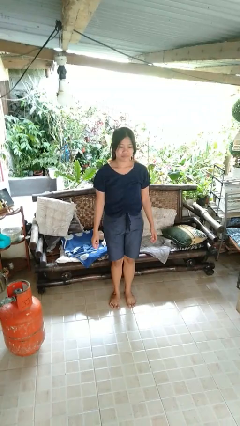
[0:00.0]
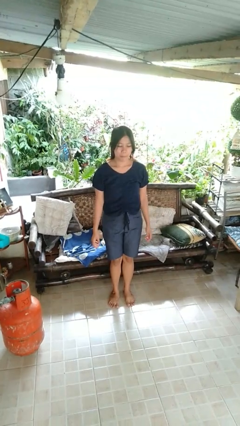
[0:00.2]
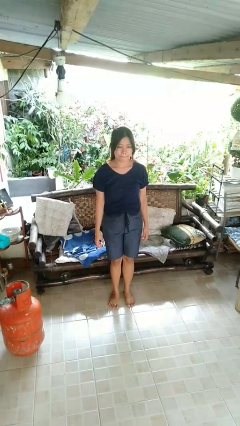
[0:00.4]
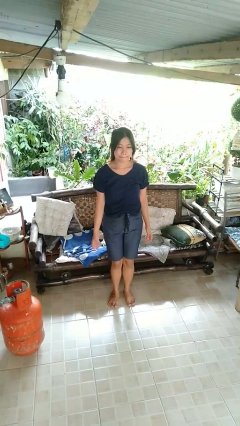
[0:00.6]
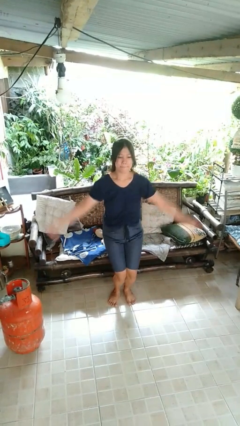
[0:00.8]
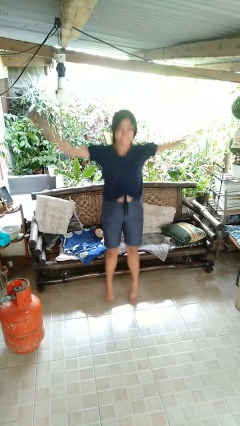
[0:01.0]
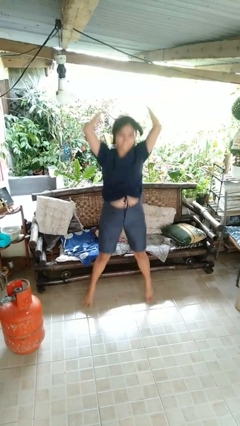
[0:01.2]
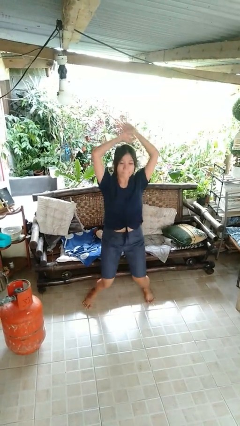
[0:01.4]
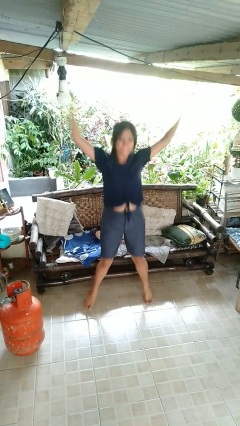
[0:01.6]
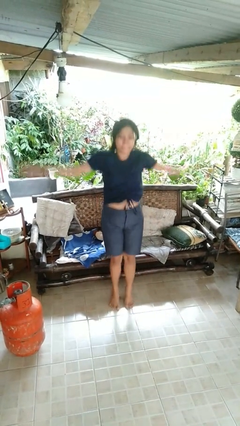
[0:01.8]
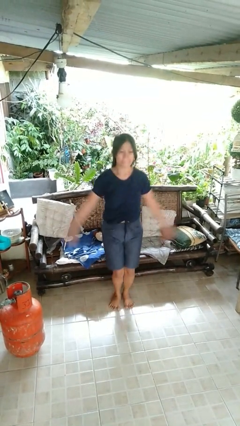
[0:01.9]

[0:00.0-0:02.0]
person exercises with jumping jacks

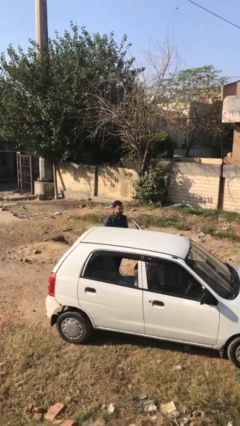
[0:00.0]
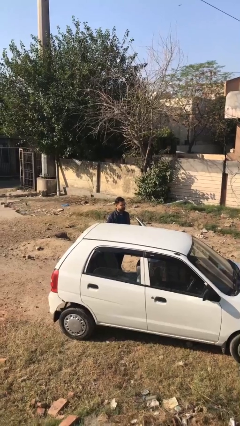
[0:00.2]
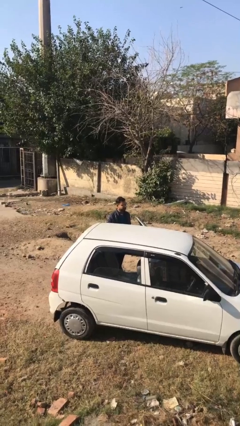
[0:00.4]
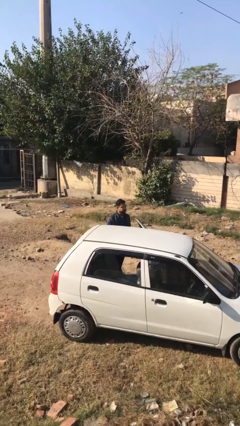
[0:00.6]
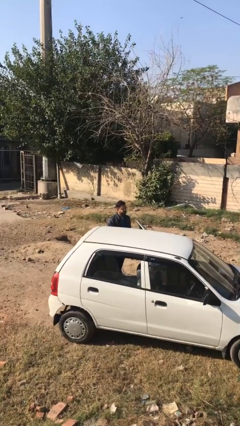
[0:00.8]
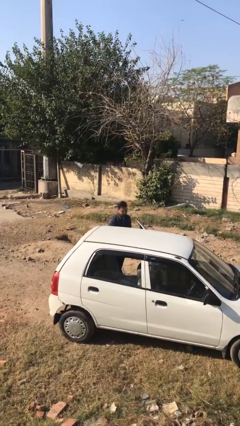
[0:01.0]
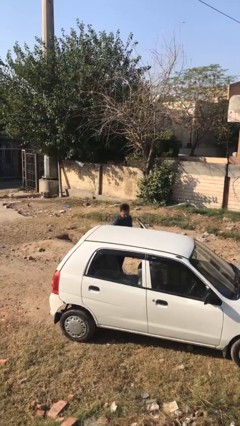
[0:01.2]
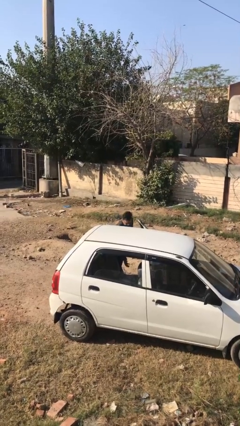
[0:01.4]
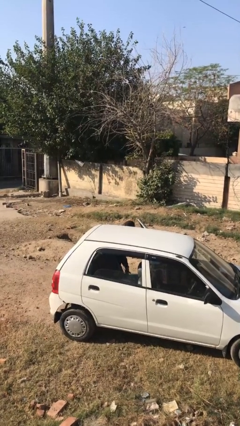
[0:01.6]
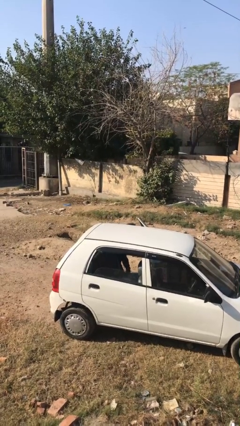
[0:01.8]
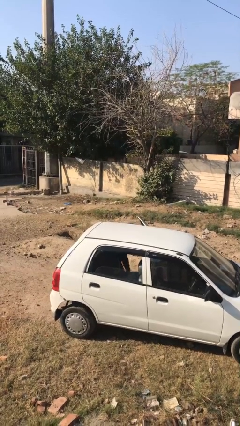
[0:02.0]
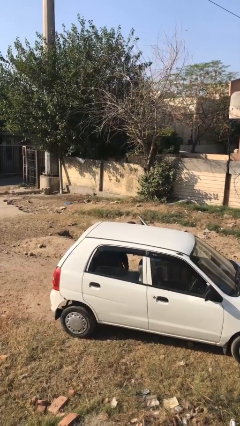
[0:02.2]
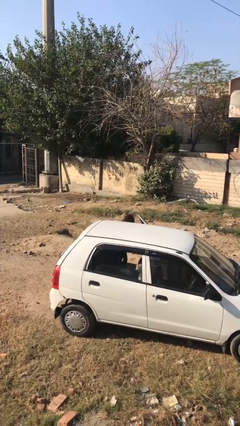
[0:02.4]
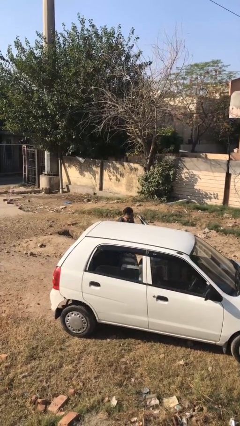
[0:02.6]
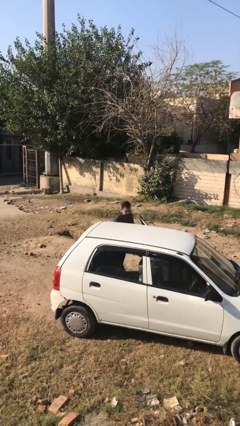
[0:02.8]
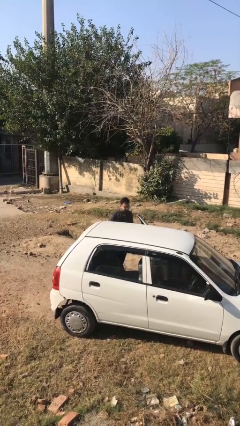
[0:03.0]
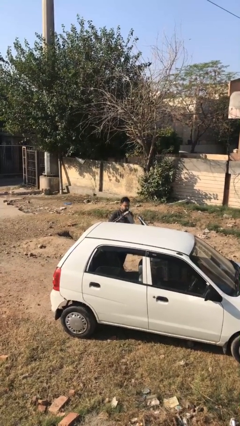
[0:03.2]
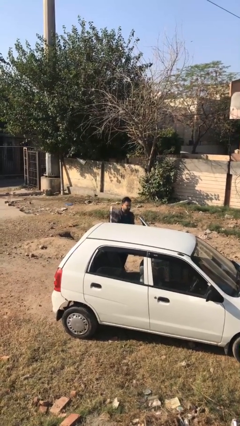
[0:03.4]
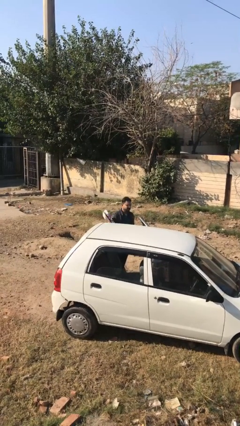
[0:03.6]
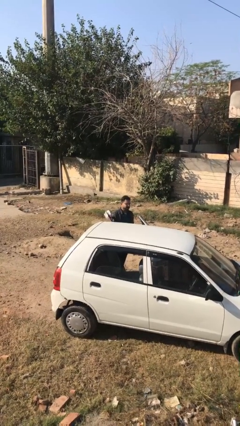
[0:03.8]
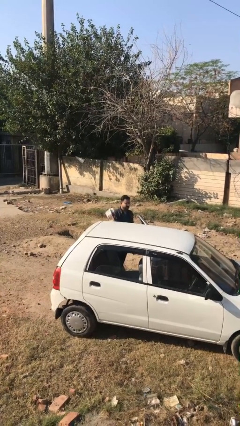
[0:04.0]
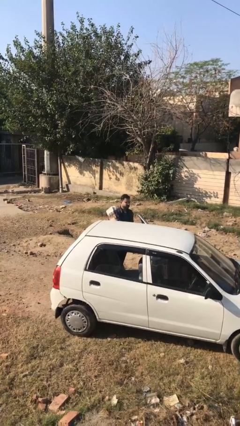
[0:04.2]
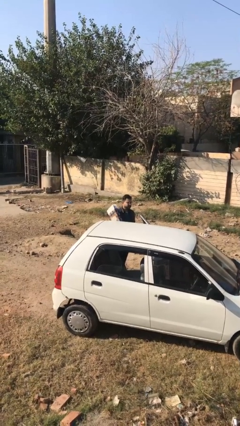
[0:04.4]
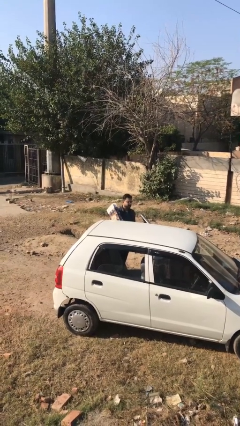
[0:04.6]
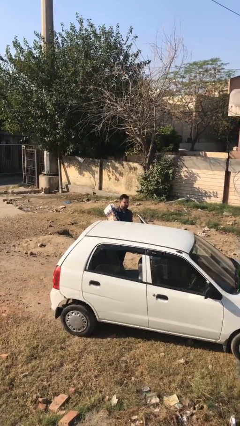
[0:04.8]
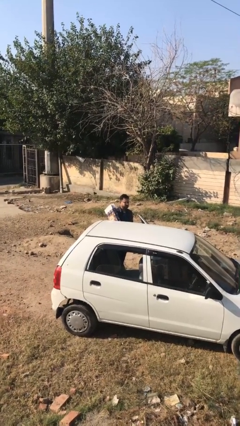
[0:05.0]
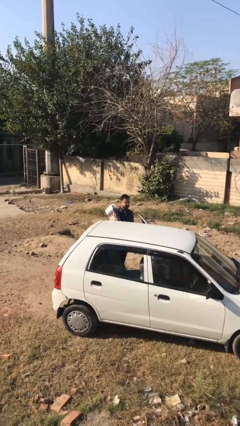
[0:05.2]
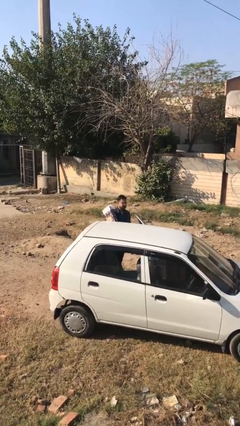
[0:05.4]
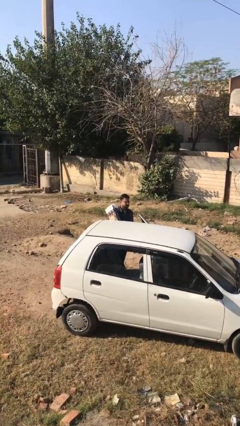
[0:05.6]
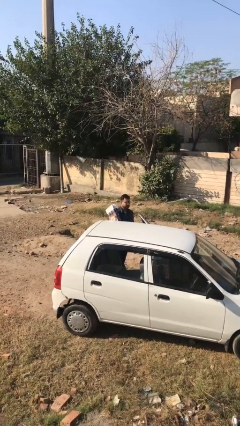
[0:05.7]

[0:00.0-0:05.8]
person unloads car

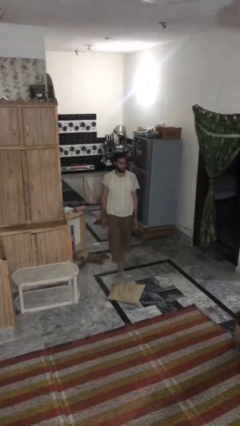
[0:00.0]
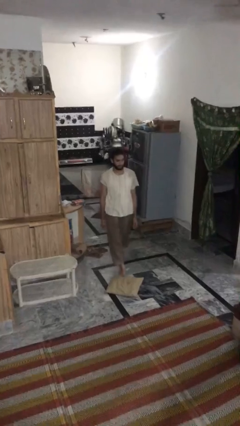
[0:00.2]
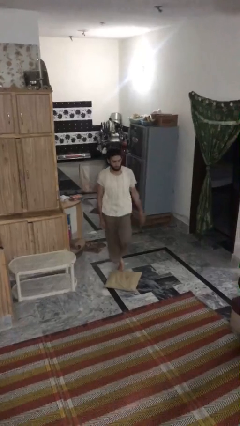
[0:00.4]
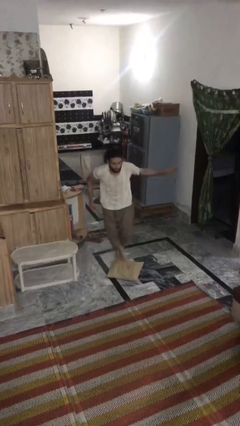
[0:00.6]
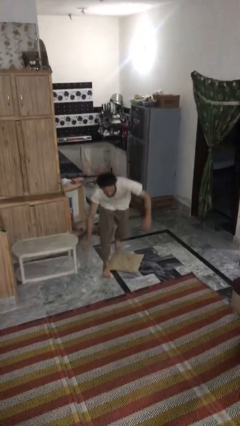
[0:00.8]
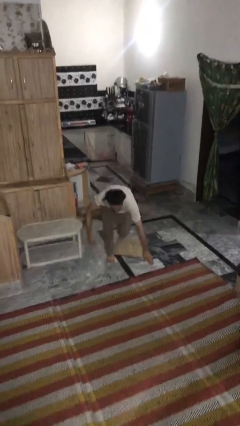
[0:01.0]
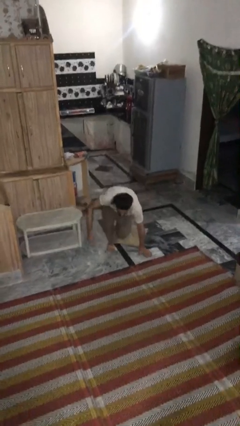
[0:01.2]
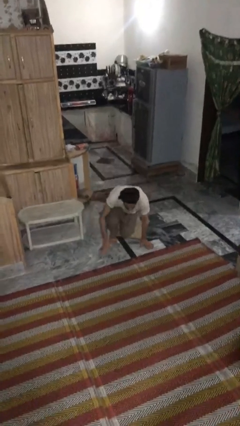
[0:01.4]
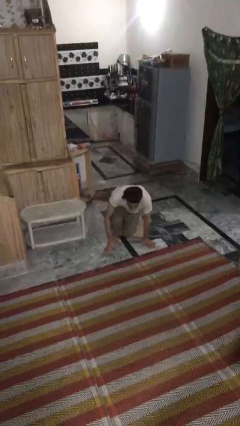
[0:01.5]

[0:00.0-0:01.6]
person trips on object on floor

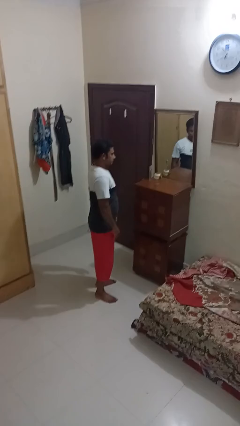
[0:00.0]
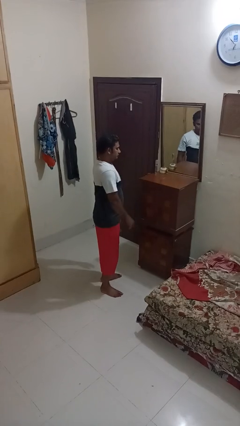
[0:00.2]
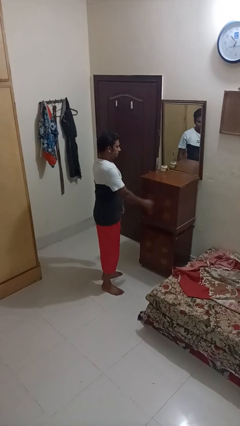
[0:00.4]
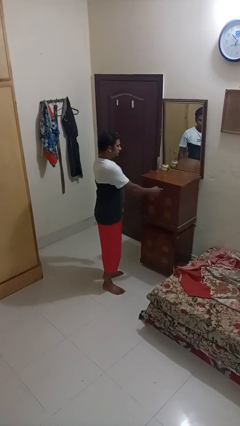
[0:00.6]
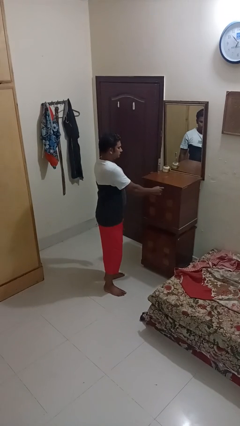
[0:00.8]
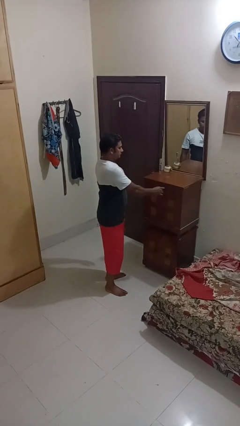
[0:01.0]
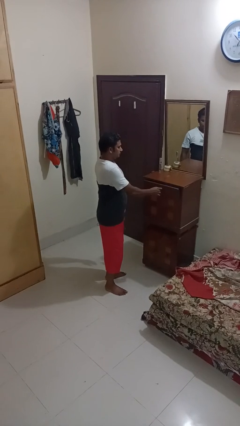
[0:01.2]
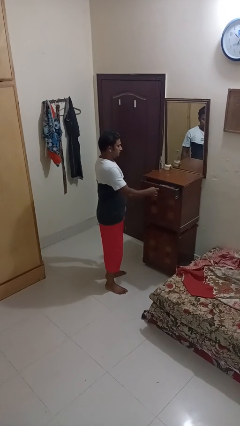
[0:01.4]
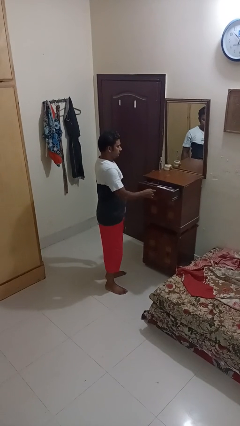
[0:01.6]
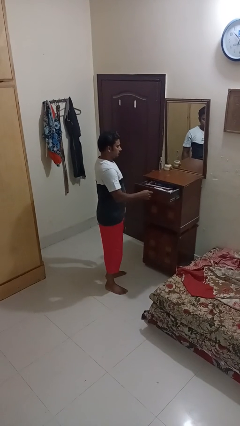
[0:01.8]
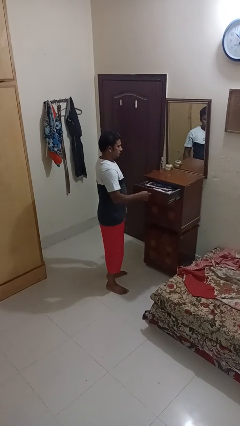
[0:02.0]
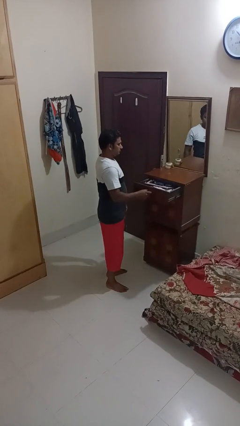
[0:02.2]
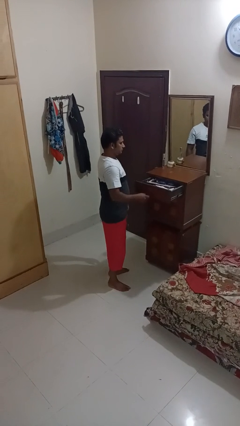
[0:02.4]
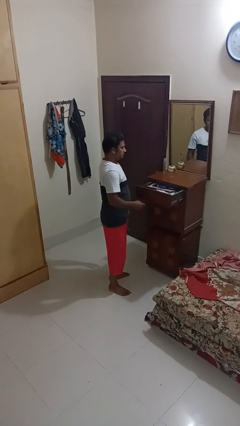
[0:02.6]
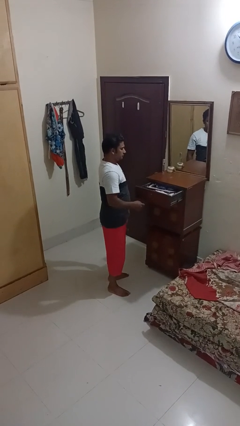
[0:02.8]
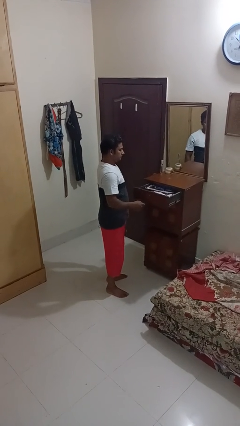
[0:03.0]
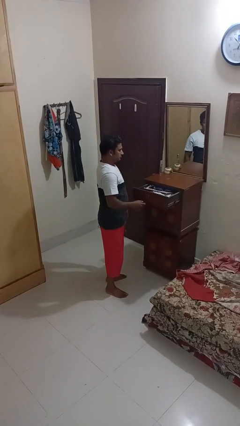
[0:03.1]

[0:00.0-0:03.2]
person opens dresser drawer

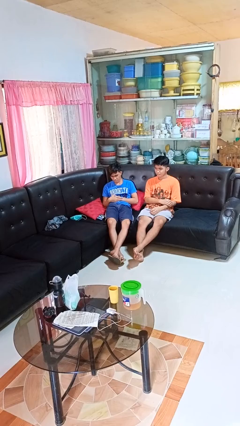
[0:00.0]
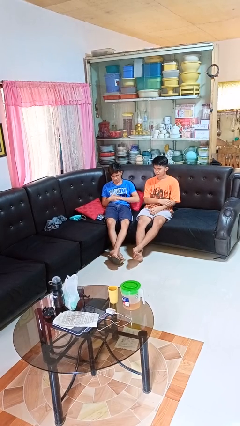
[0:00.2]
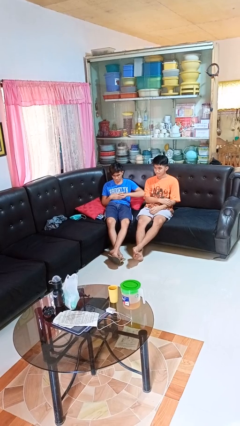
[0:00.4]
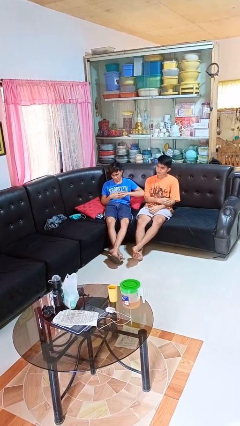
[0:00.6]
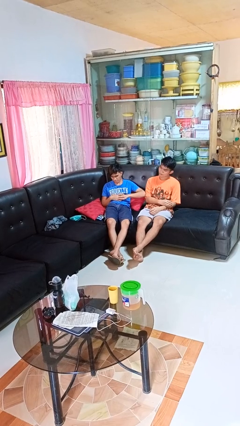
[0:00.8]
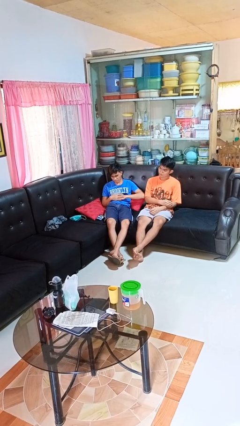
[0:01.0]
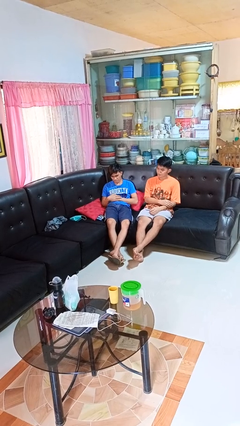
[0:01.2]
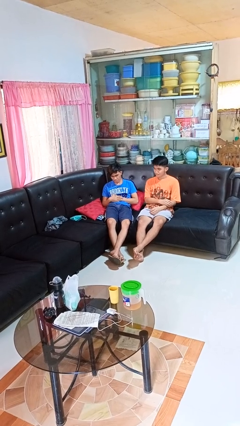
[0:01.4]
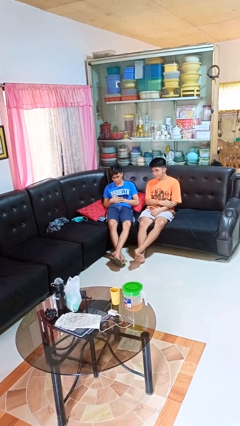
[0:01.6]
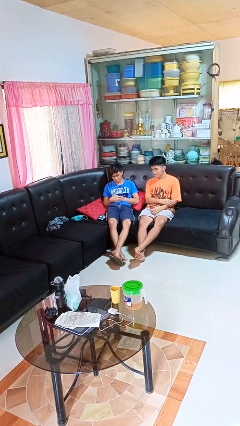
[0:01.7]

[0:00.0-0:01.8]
person nudges person with elbow

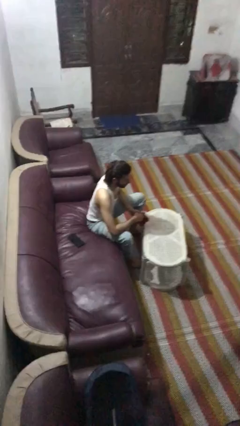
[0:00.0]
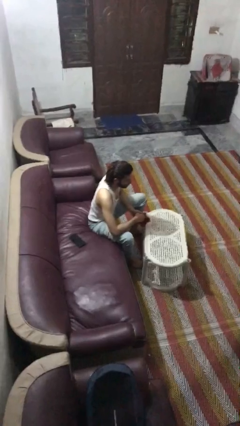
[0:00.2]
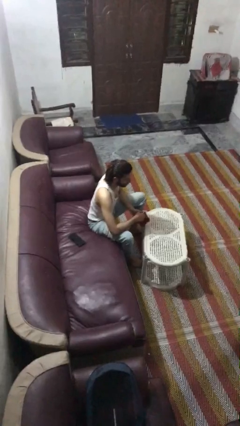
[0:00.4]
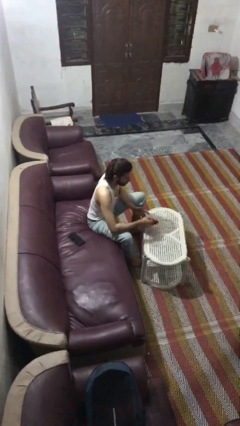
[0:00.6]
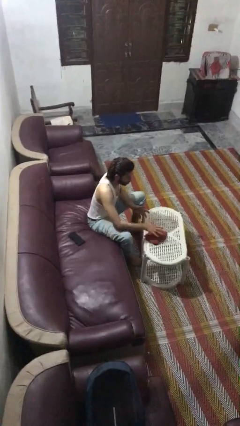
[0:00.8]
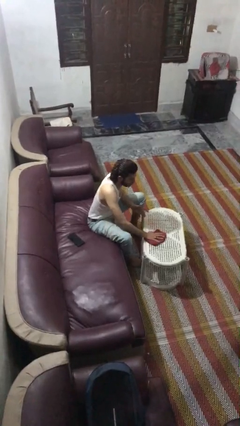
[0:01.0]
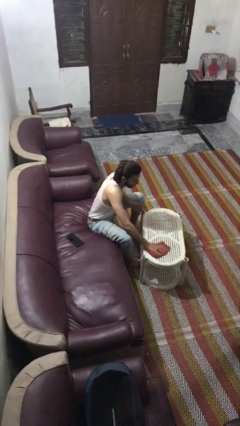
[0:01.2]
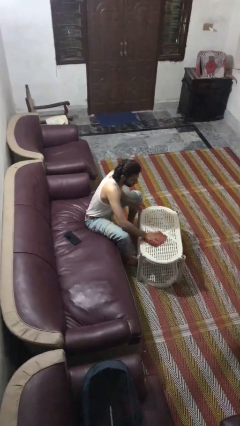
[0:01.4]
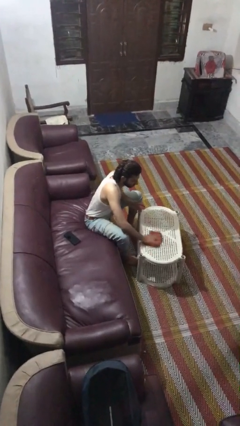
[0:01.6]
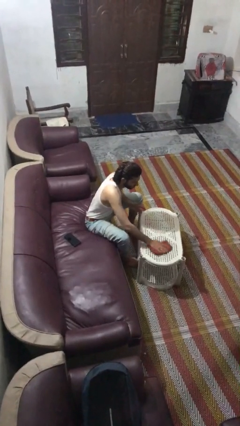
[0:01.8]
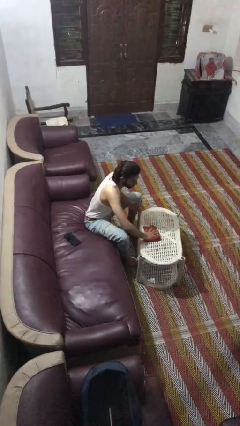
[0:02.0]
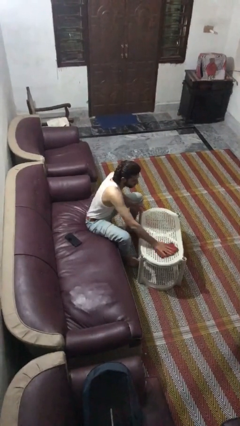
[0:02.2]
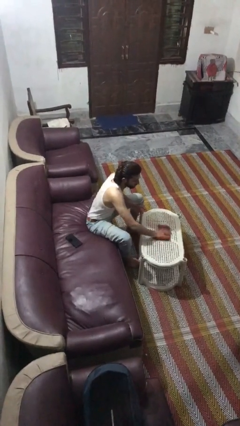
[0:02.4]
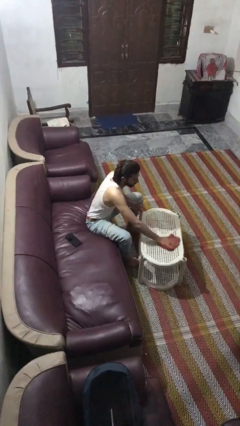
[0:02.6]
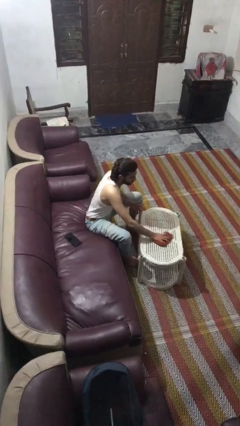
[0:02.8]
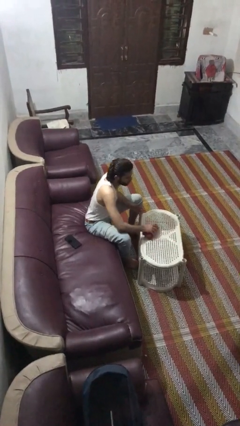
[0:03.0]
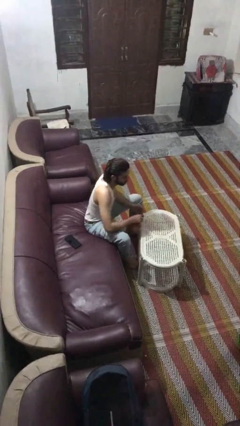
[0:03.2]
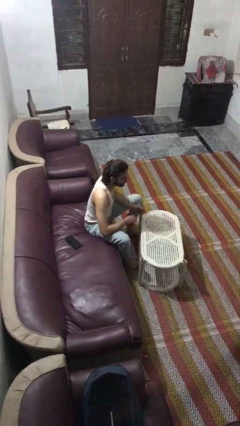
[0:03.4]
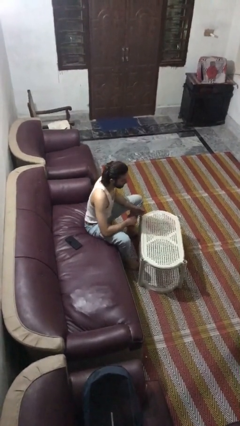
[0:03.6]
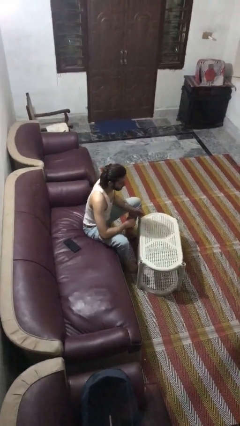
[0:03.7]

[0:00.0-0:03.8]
person cleans table with rag
